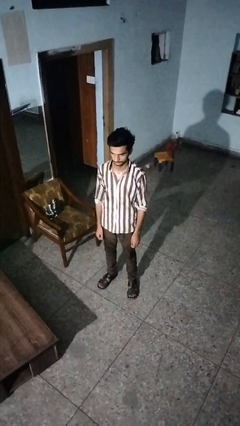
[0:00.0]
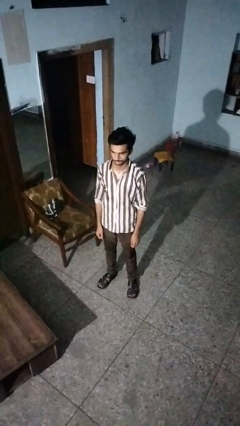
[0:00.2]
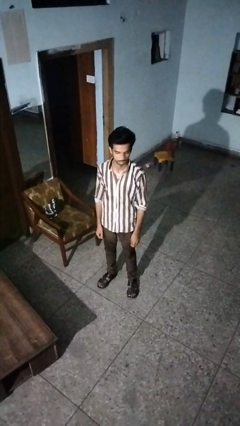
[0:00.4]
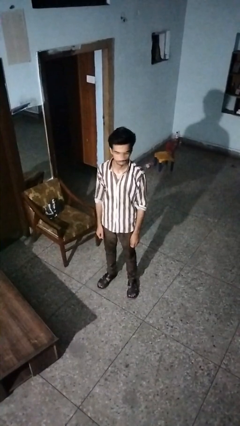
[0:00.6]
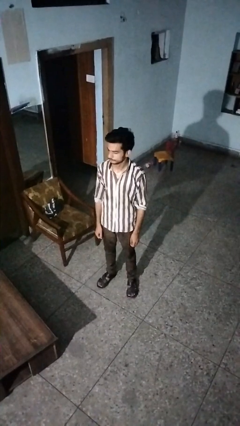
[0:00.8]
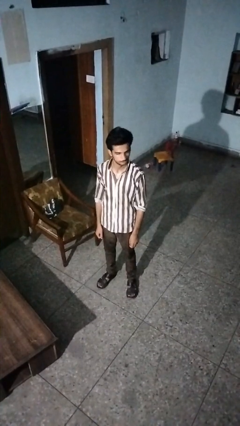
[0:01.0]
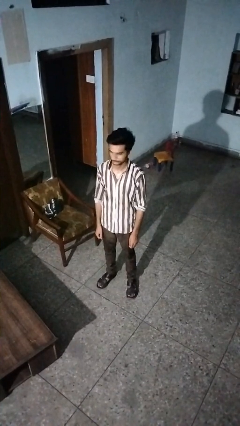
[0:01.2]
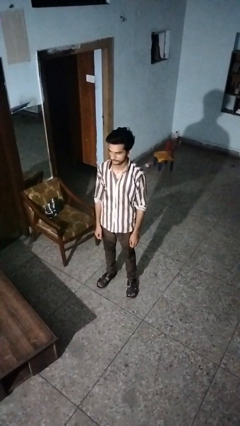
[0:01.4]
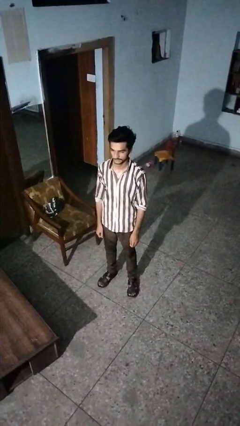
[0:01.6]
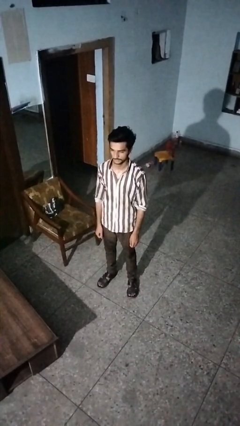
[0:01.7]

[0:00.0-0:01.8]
person shakes head

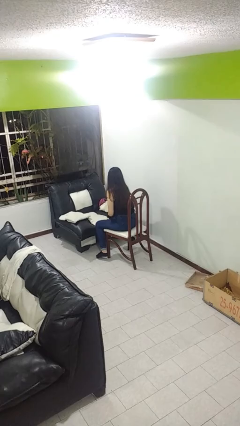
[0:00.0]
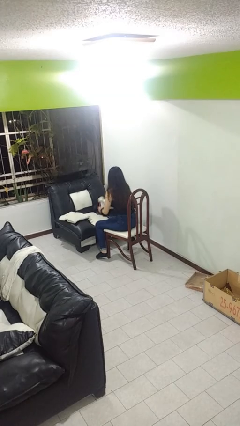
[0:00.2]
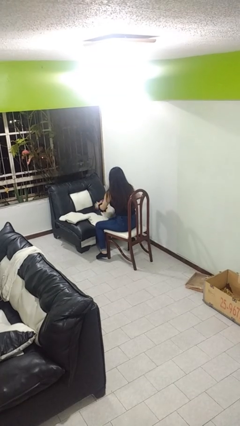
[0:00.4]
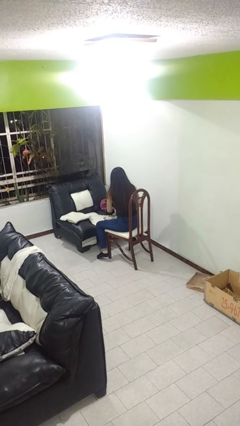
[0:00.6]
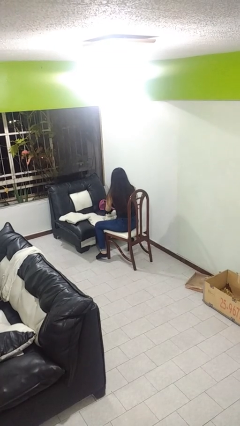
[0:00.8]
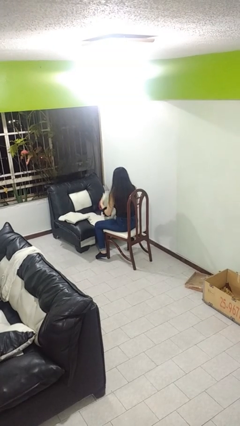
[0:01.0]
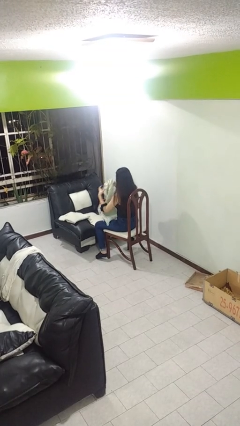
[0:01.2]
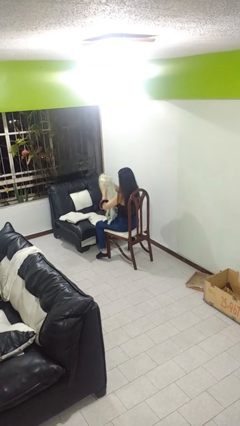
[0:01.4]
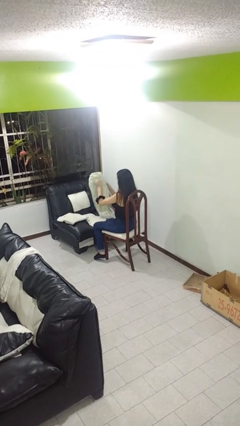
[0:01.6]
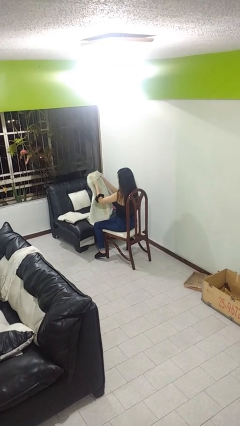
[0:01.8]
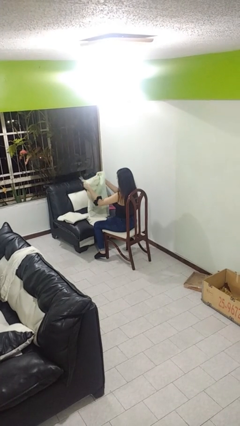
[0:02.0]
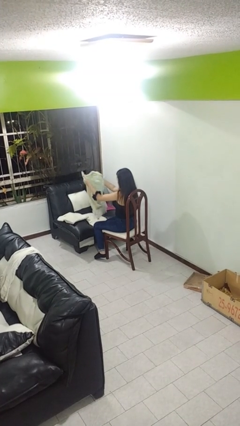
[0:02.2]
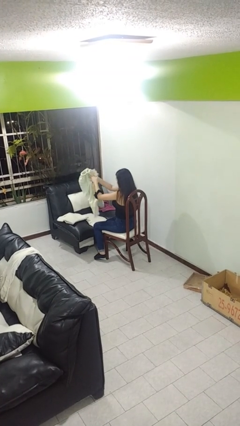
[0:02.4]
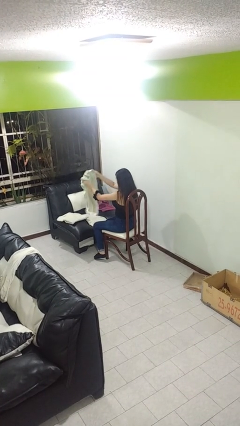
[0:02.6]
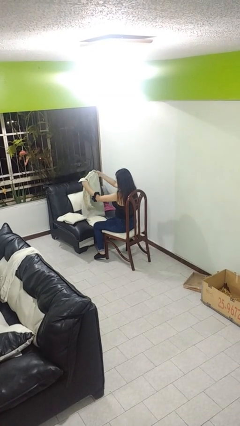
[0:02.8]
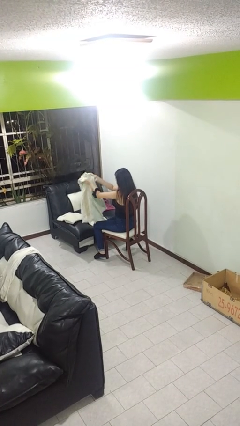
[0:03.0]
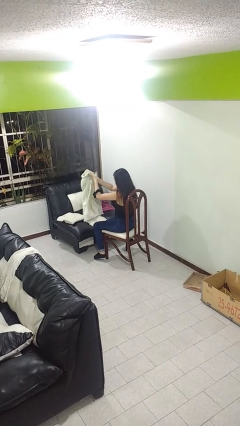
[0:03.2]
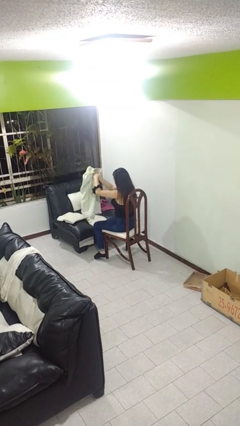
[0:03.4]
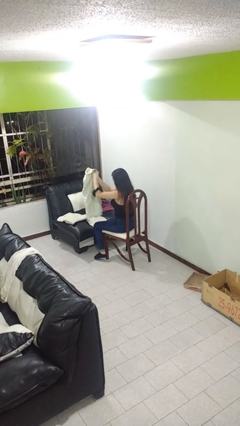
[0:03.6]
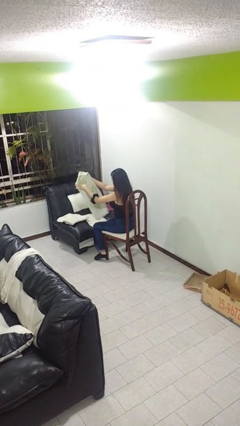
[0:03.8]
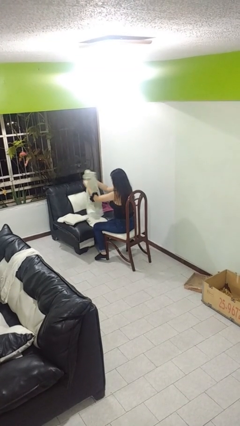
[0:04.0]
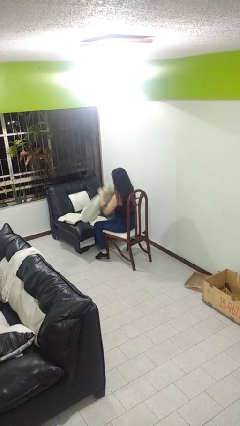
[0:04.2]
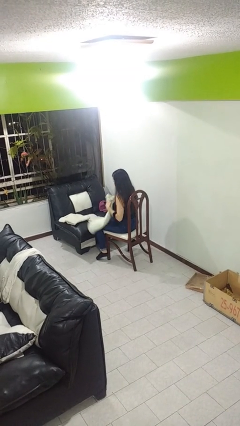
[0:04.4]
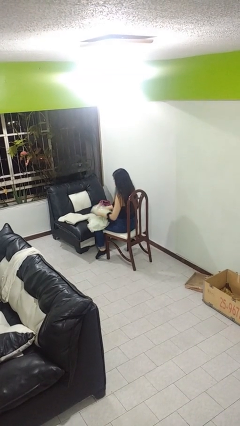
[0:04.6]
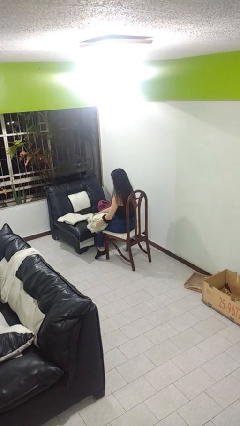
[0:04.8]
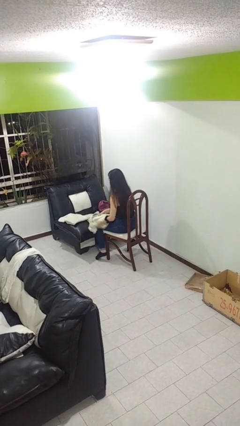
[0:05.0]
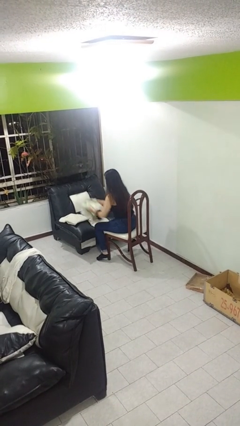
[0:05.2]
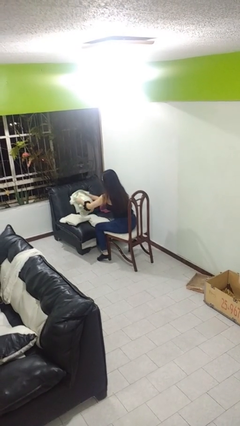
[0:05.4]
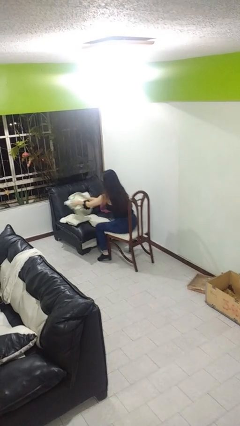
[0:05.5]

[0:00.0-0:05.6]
person folds towel

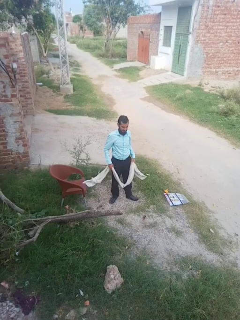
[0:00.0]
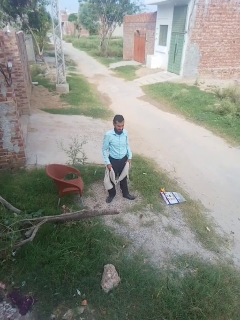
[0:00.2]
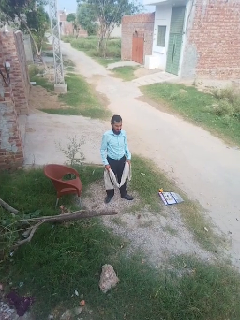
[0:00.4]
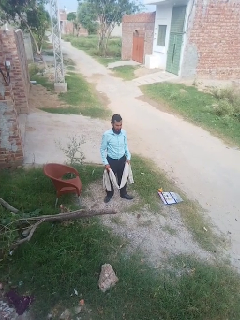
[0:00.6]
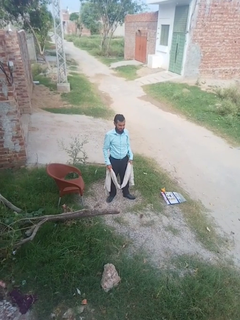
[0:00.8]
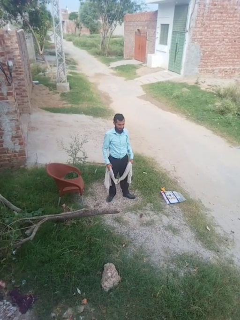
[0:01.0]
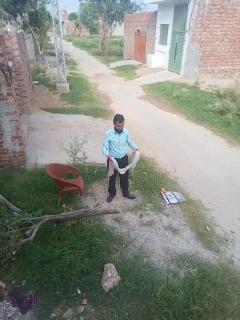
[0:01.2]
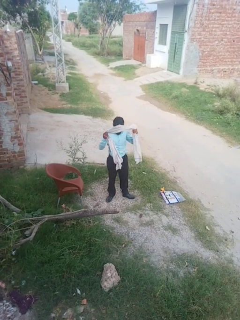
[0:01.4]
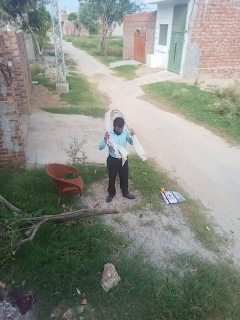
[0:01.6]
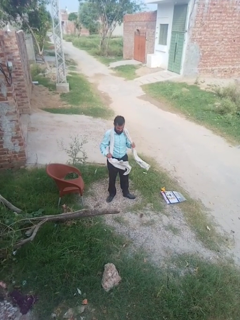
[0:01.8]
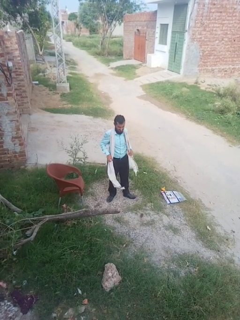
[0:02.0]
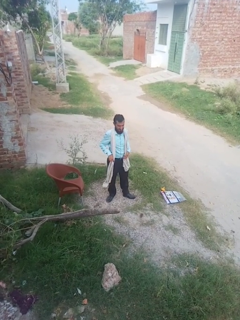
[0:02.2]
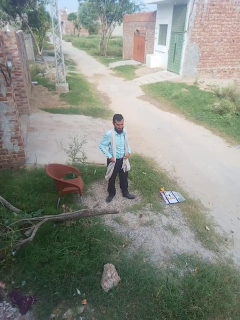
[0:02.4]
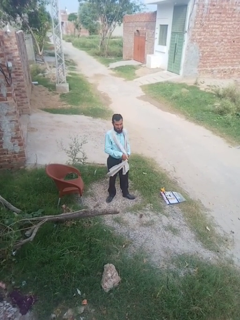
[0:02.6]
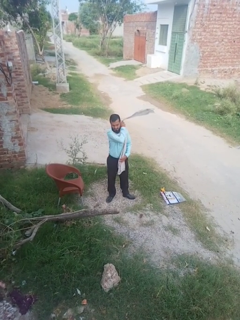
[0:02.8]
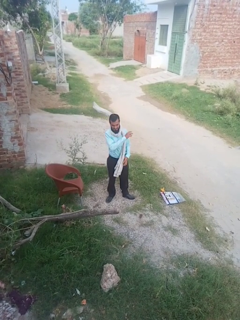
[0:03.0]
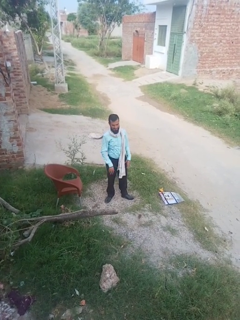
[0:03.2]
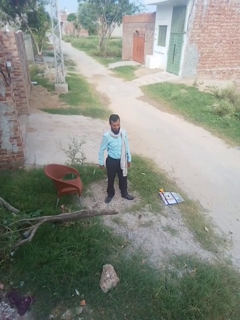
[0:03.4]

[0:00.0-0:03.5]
person puts on scarf

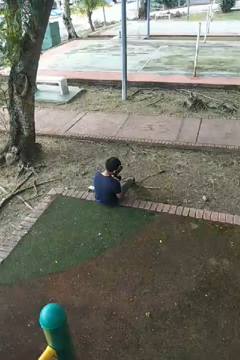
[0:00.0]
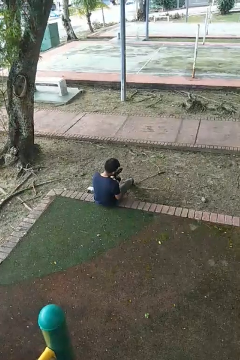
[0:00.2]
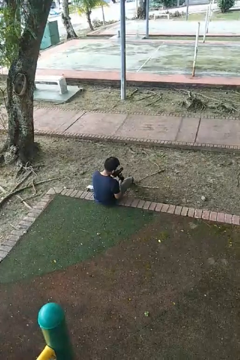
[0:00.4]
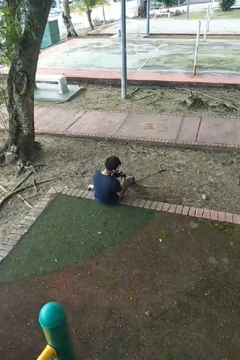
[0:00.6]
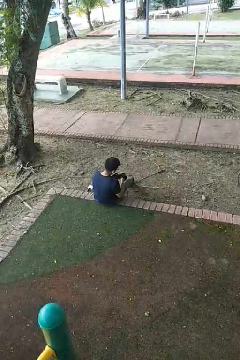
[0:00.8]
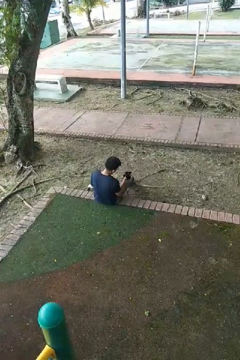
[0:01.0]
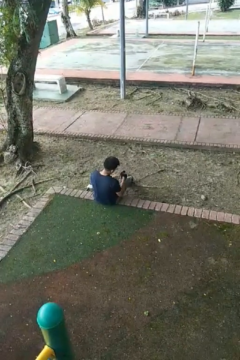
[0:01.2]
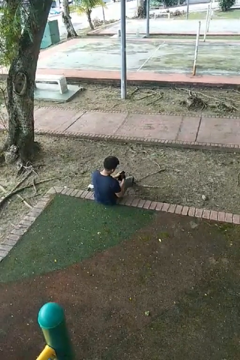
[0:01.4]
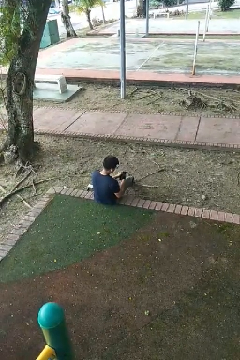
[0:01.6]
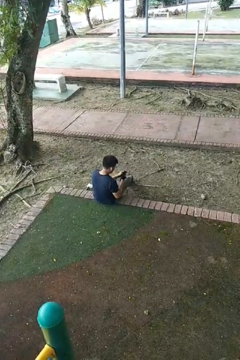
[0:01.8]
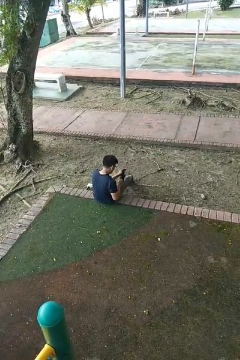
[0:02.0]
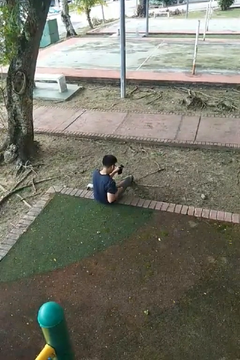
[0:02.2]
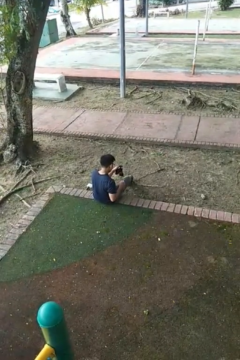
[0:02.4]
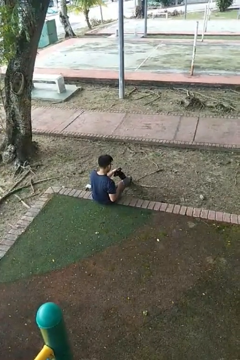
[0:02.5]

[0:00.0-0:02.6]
person takes off gloves

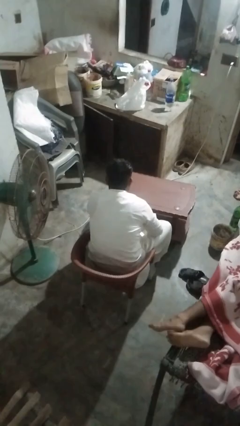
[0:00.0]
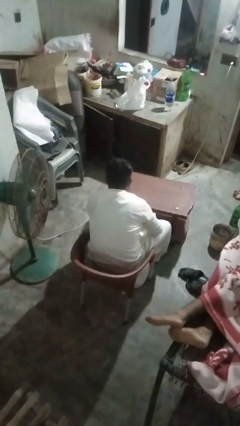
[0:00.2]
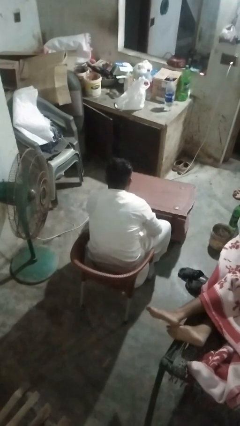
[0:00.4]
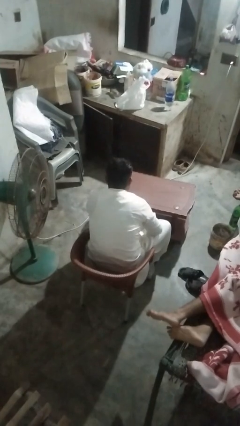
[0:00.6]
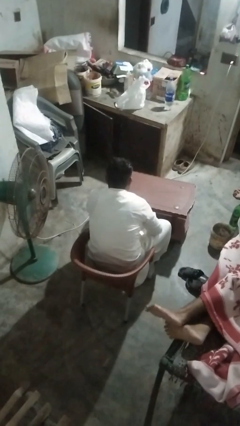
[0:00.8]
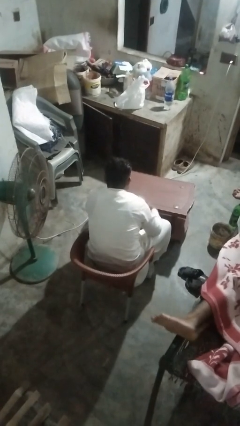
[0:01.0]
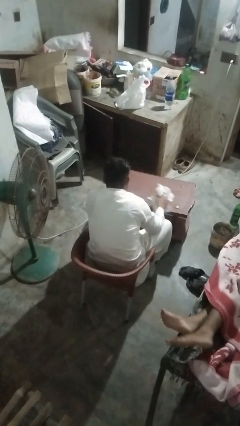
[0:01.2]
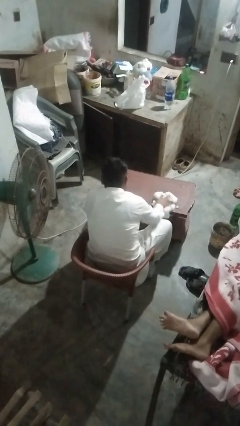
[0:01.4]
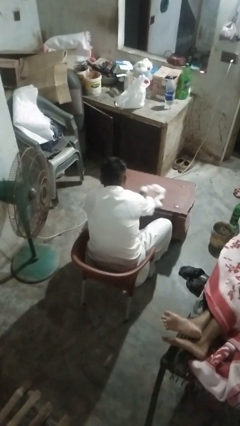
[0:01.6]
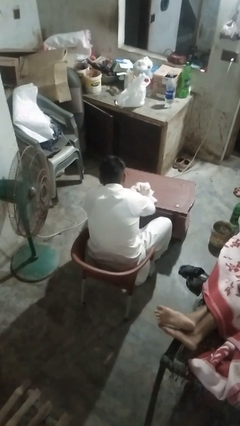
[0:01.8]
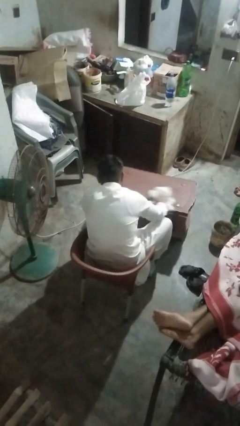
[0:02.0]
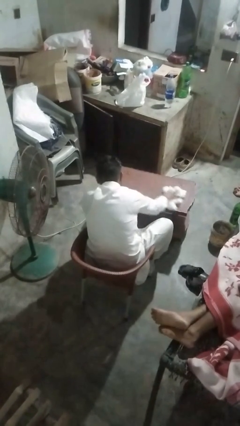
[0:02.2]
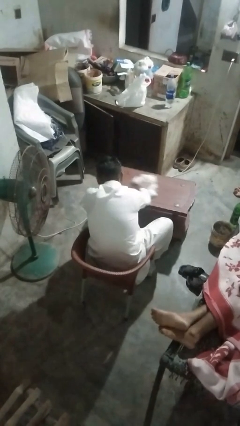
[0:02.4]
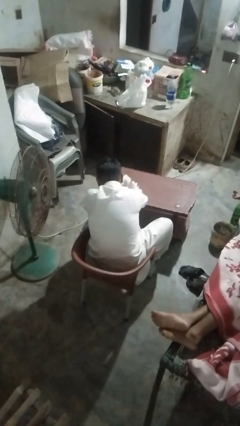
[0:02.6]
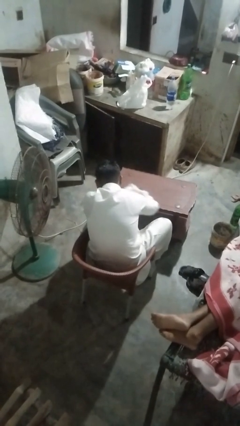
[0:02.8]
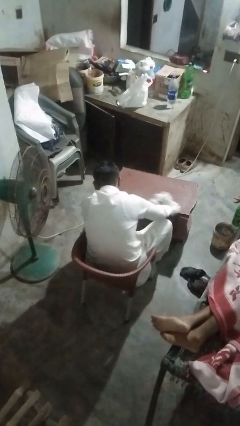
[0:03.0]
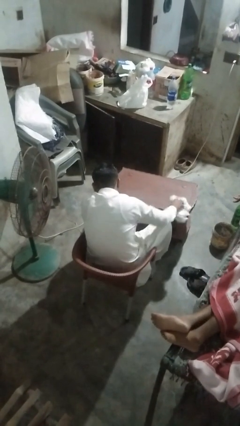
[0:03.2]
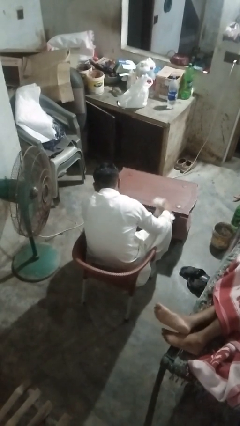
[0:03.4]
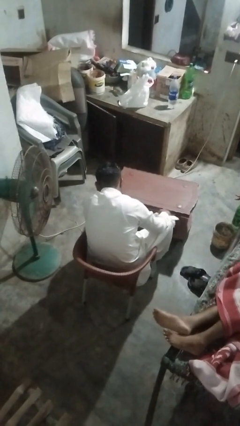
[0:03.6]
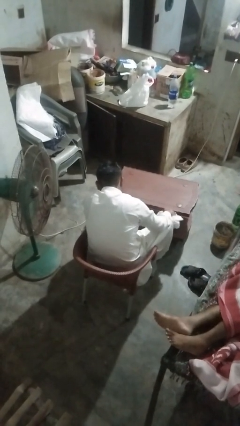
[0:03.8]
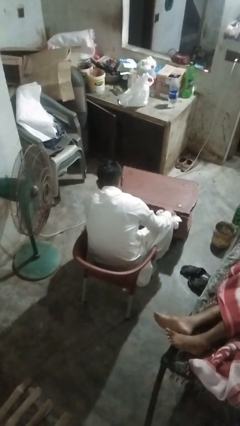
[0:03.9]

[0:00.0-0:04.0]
person cleans table with rag

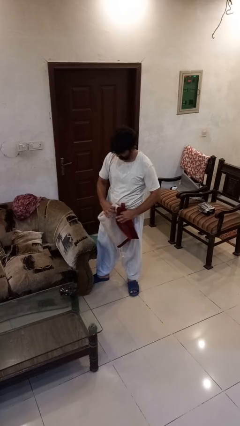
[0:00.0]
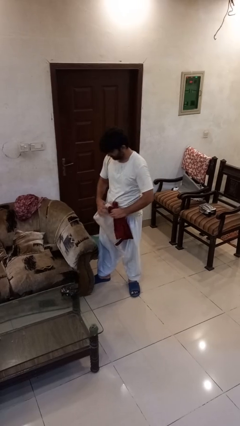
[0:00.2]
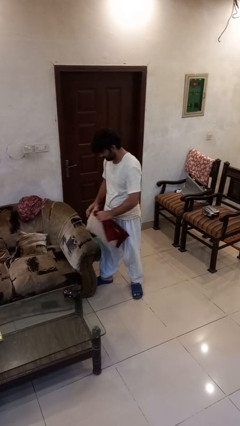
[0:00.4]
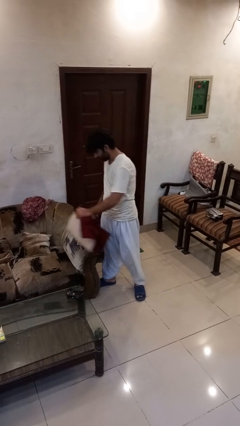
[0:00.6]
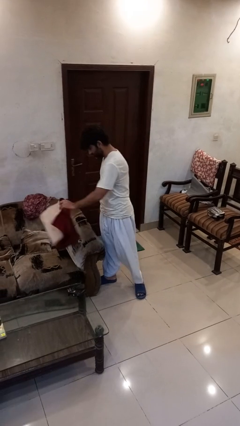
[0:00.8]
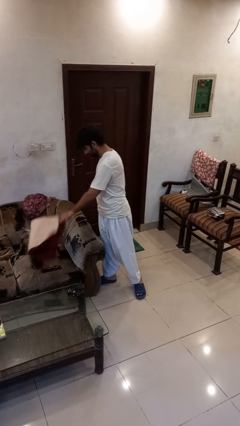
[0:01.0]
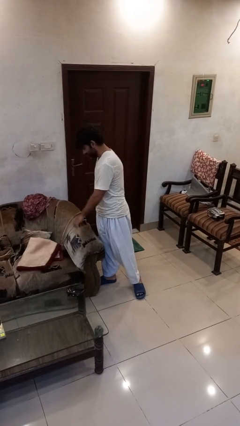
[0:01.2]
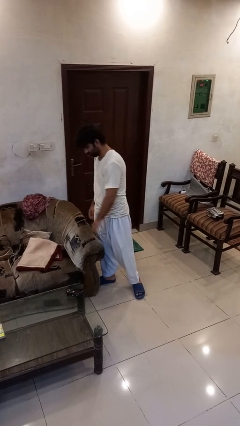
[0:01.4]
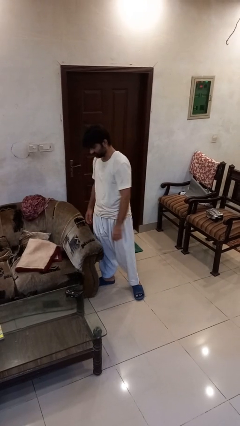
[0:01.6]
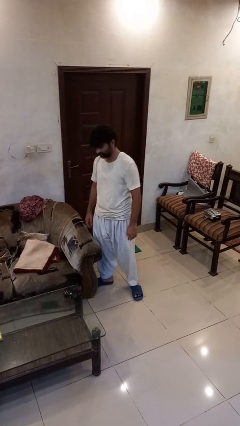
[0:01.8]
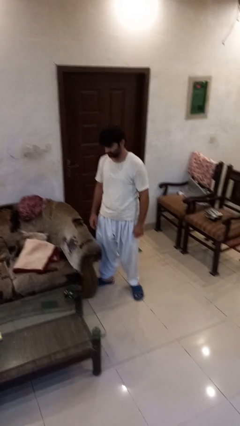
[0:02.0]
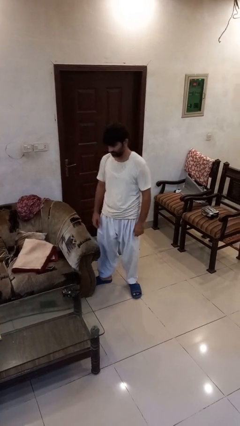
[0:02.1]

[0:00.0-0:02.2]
person puts down object on couch
